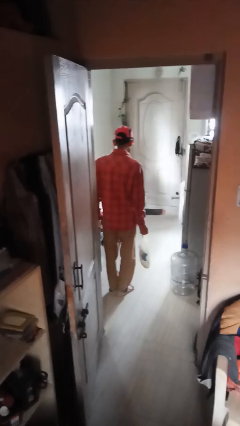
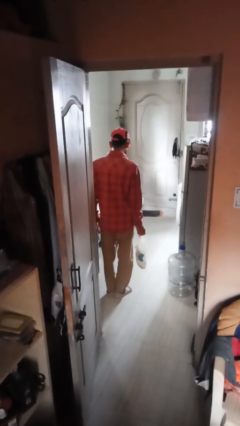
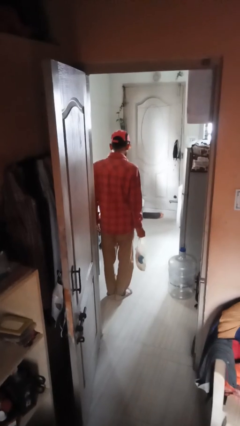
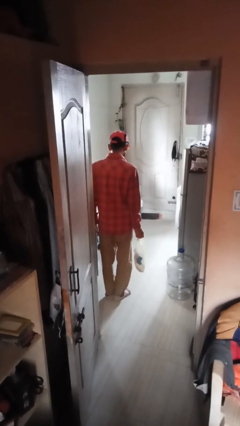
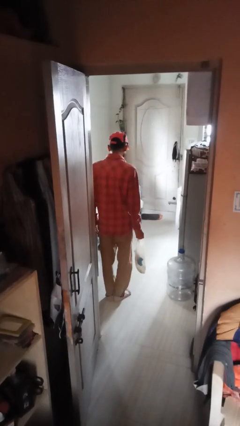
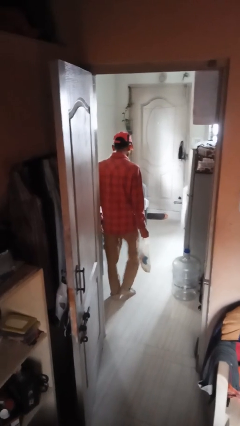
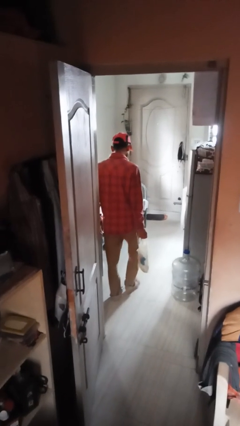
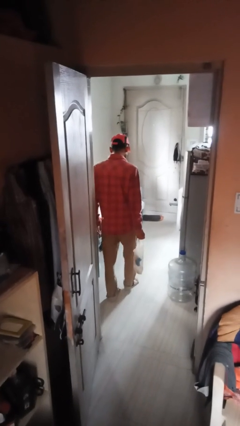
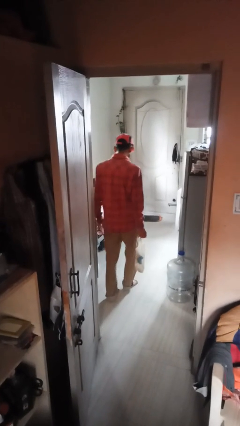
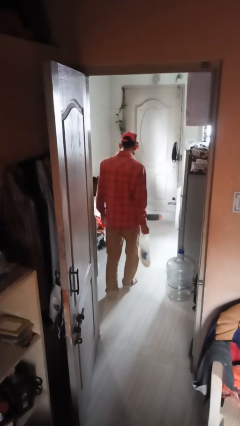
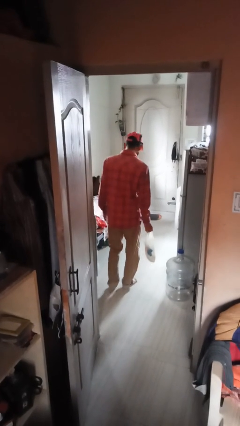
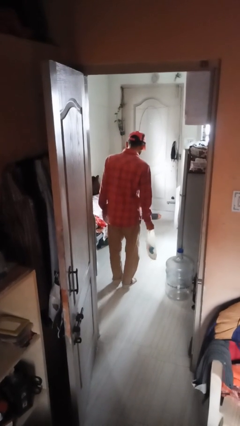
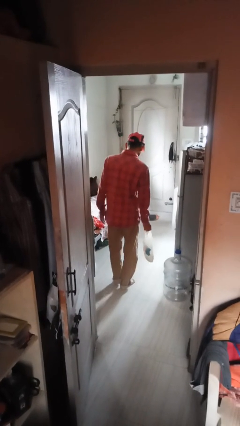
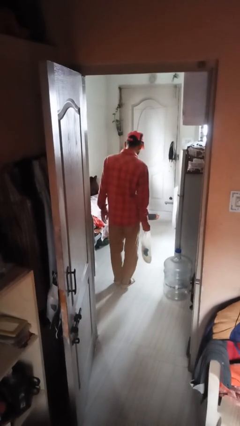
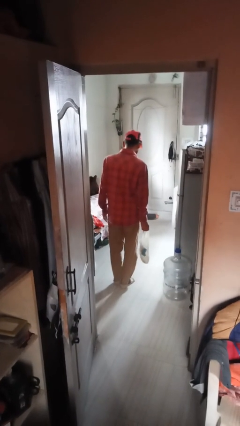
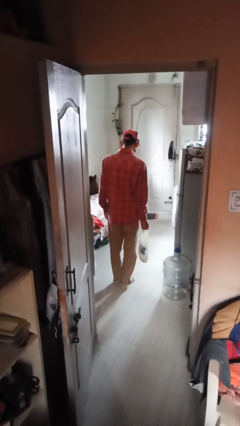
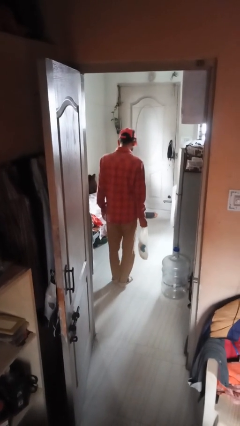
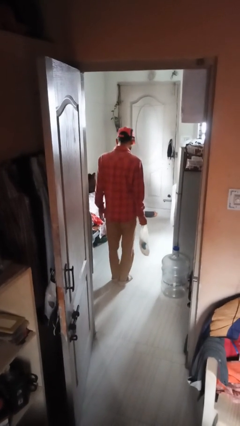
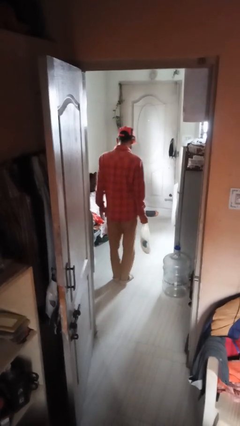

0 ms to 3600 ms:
person carries groceries

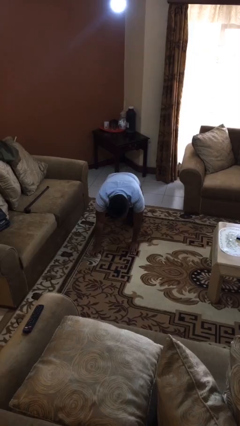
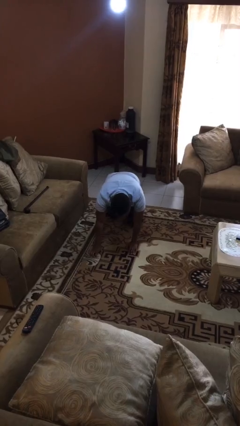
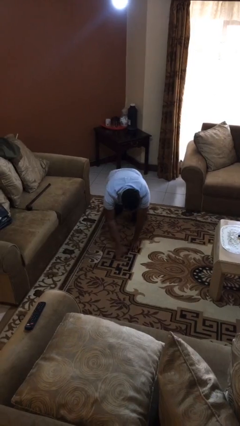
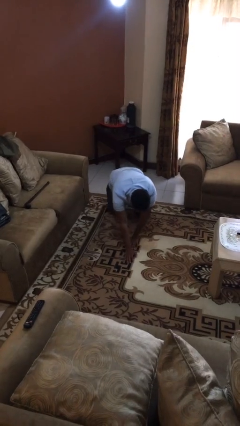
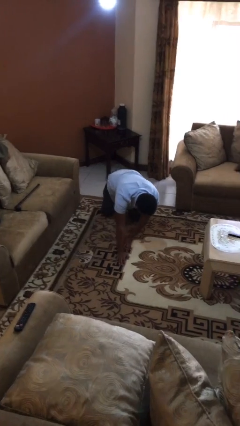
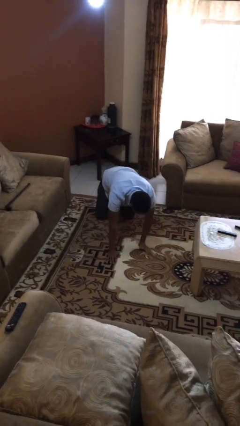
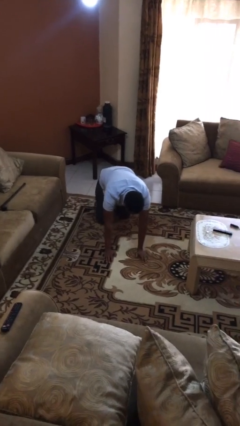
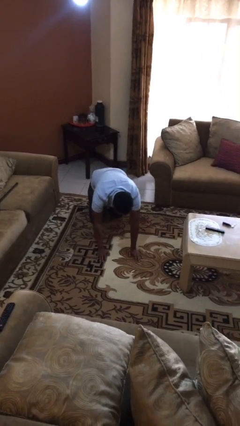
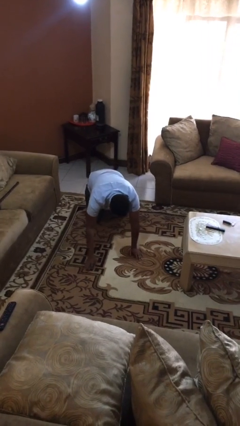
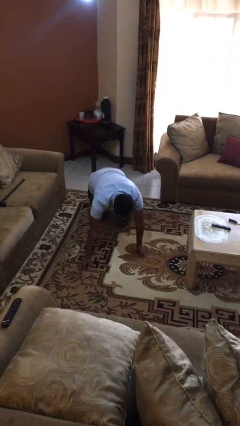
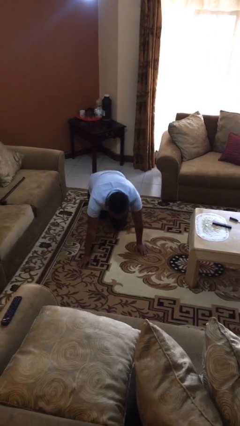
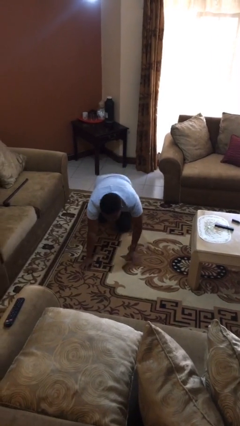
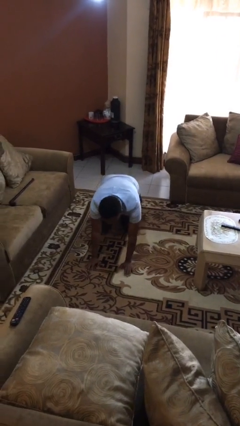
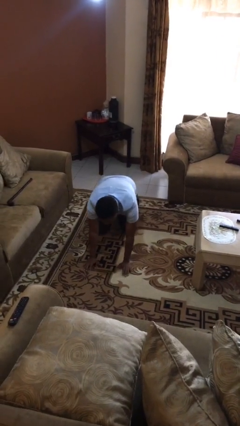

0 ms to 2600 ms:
person crawls

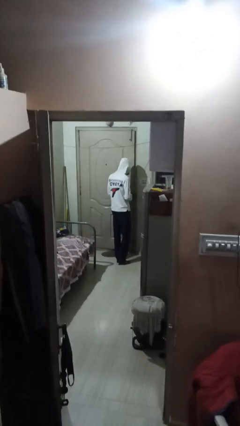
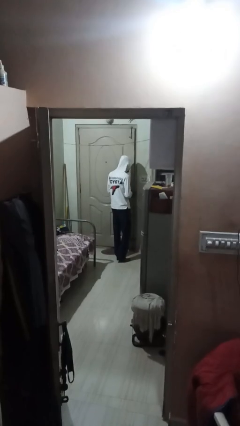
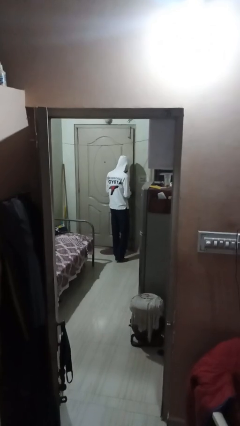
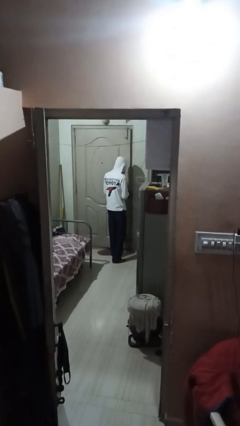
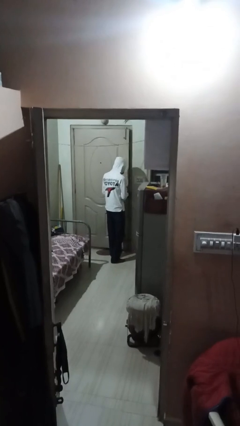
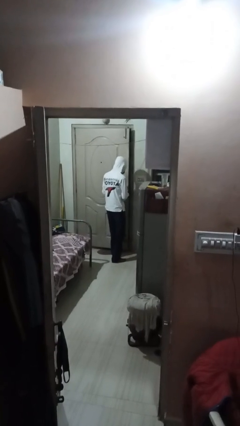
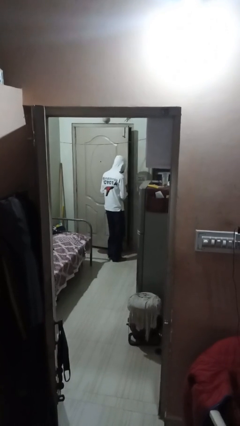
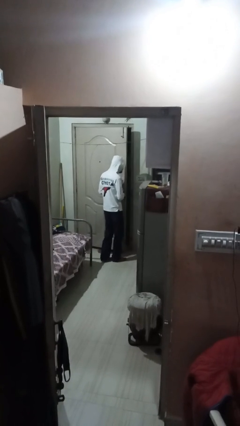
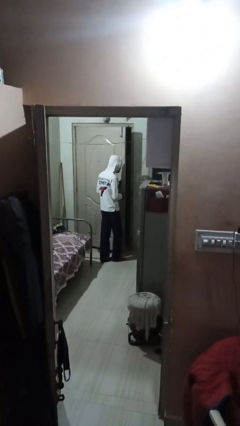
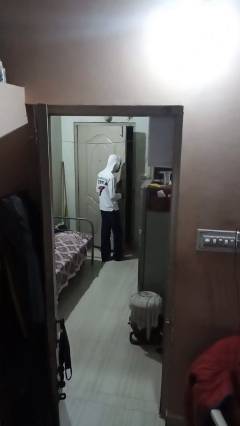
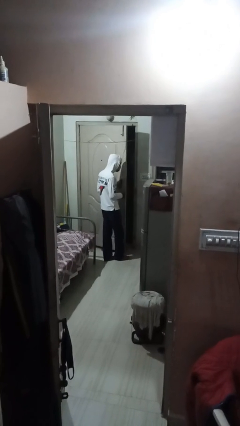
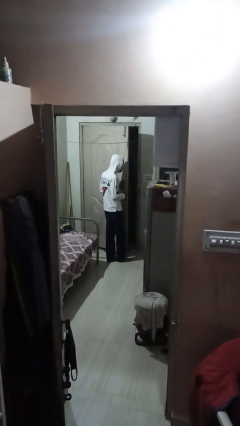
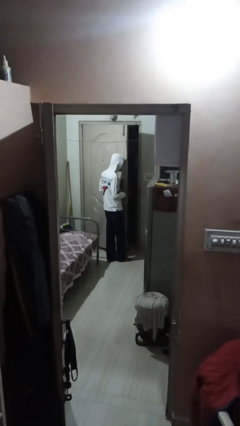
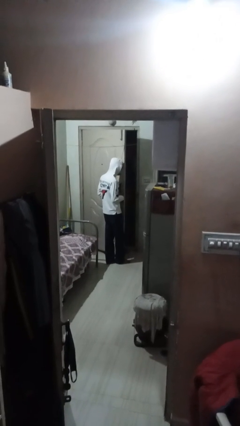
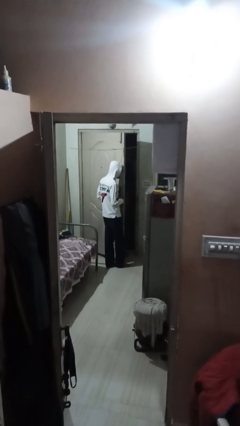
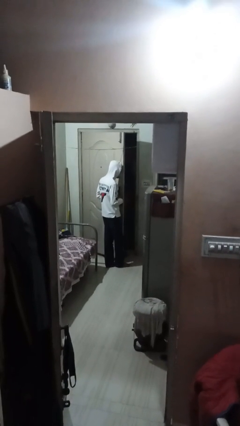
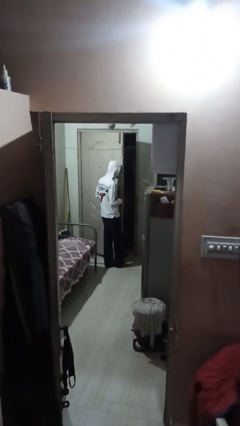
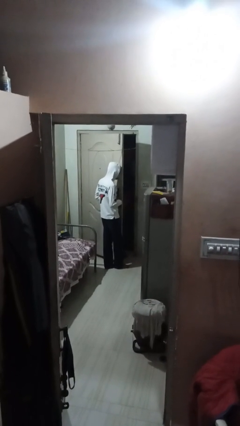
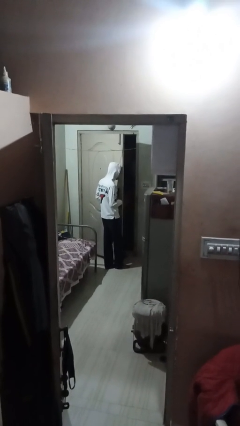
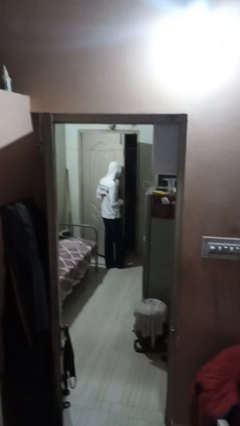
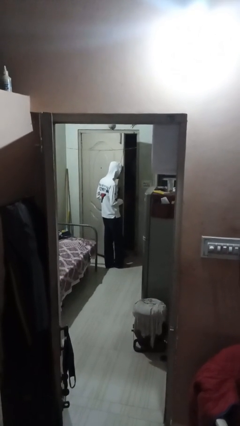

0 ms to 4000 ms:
person opens facility door

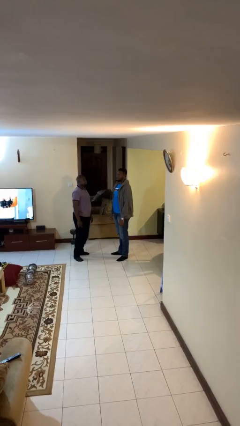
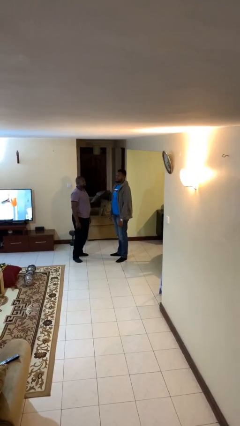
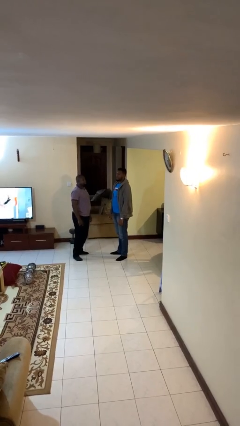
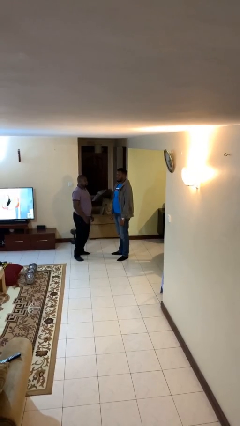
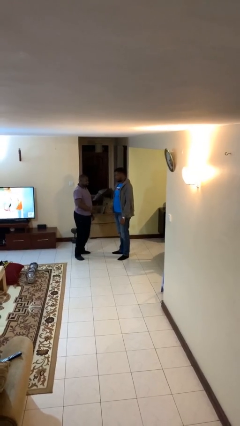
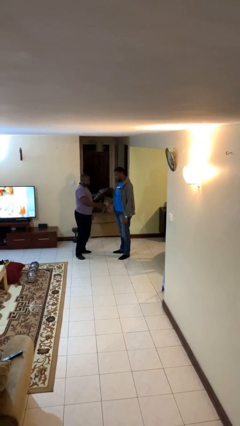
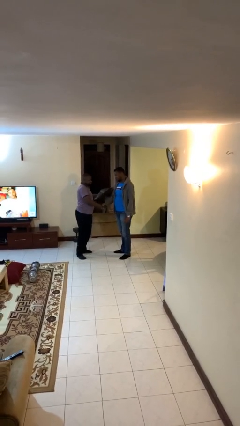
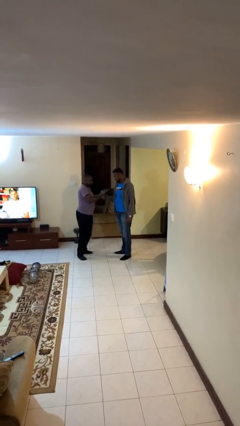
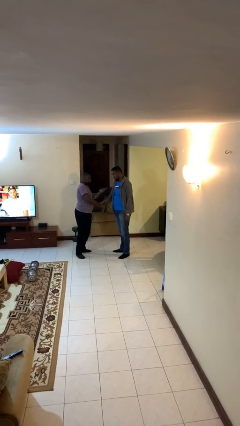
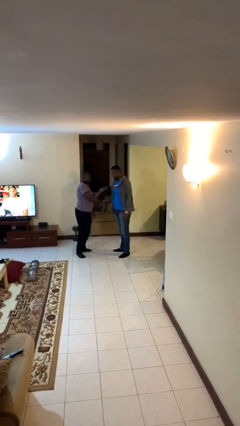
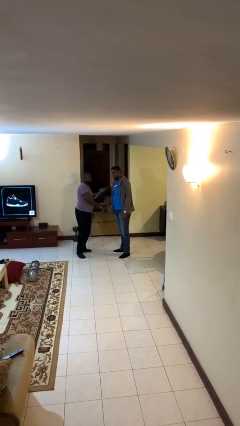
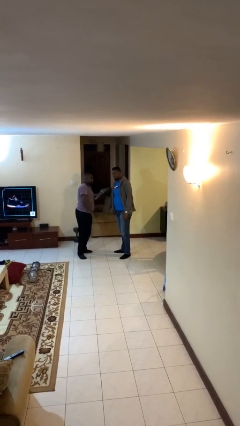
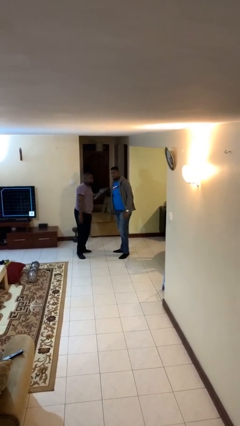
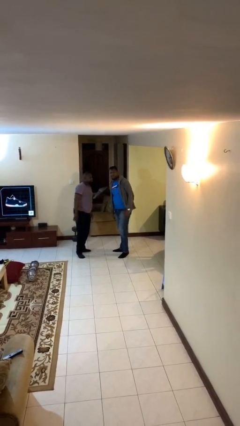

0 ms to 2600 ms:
person shakes hand

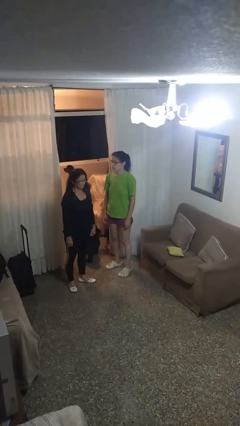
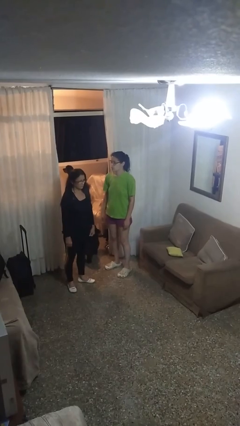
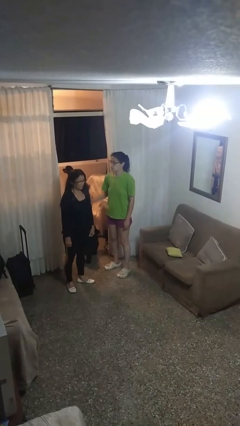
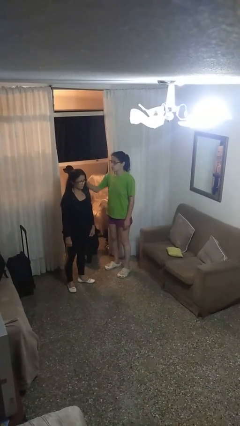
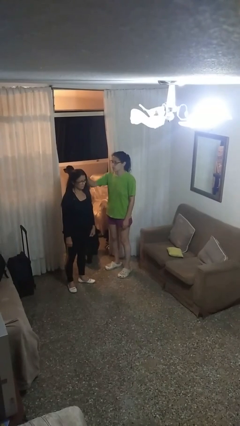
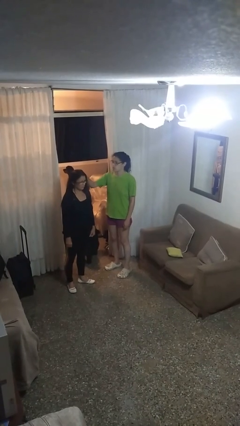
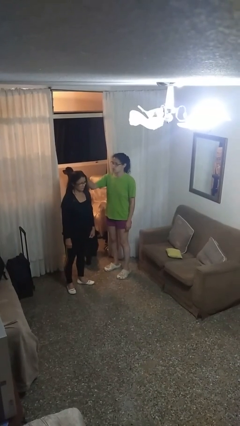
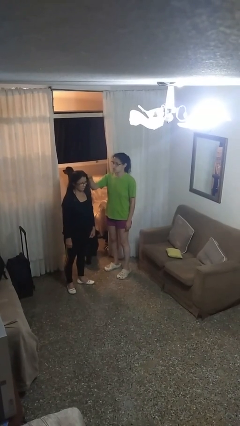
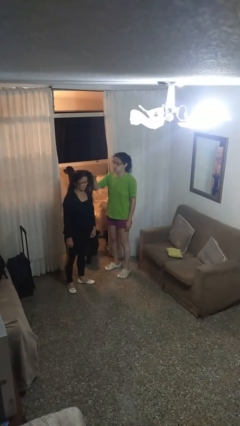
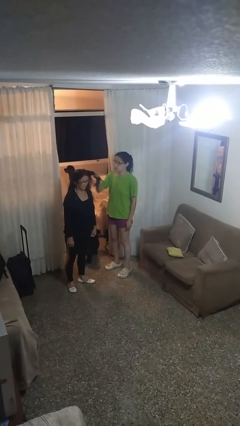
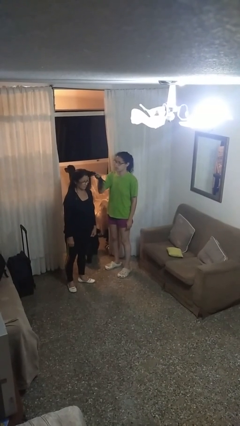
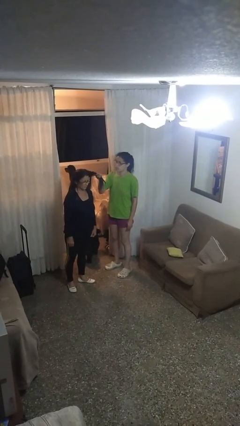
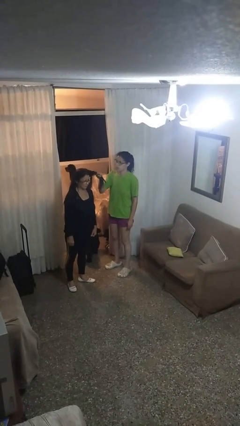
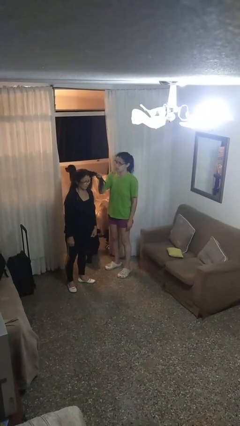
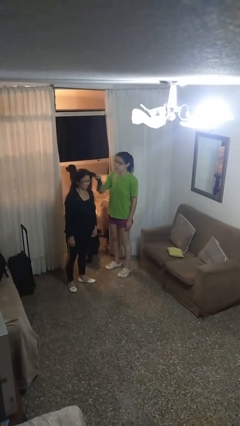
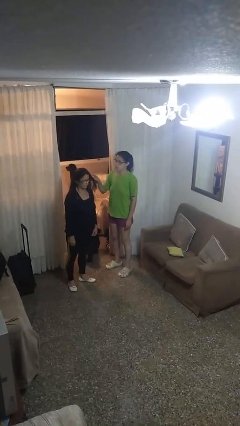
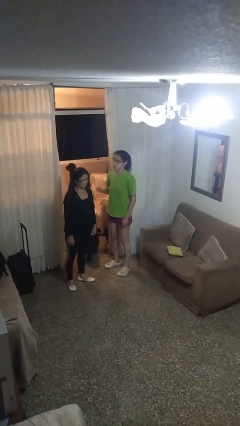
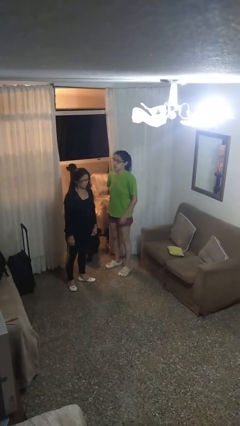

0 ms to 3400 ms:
person grabs person by hair

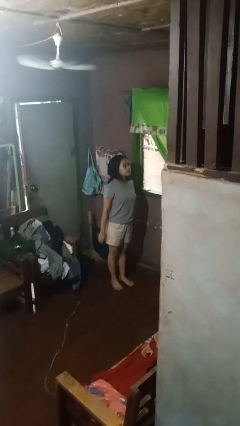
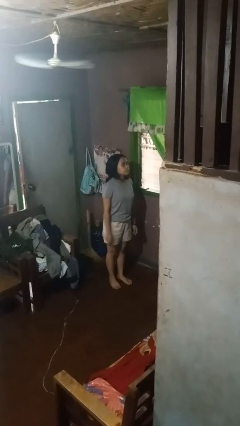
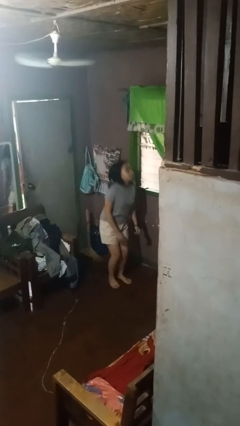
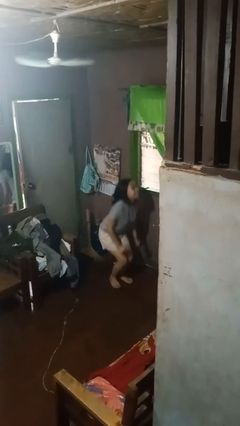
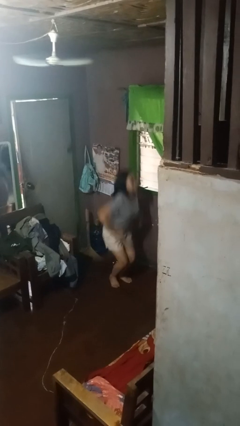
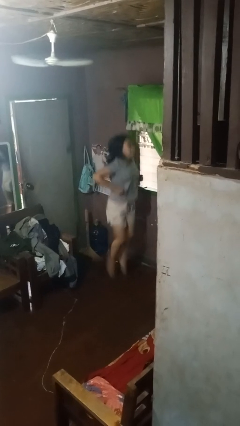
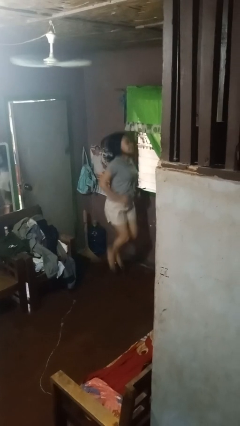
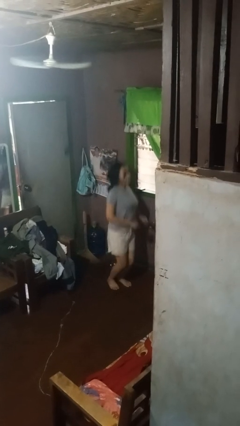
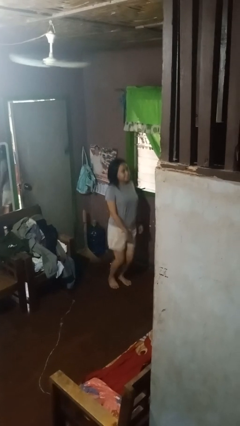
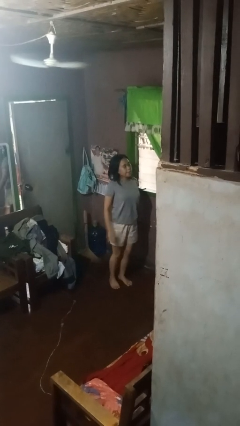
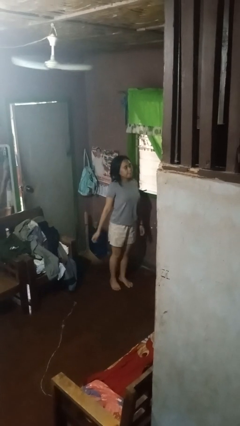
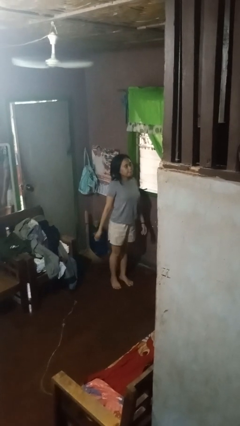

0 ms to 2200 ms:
person jumps
